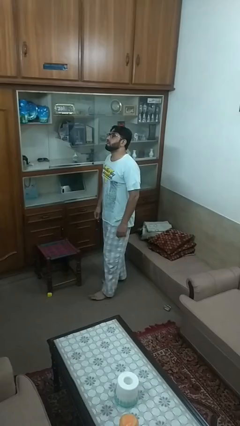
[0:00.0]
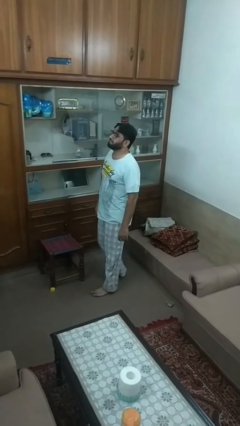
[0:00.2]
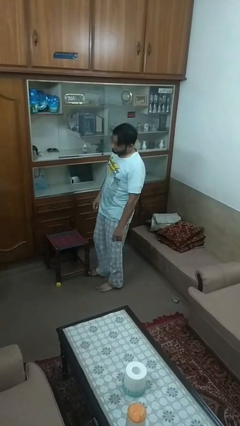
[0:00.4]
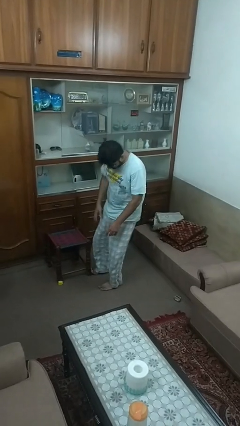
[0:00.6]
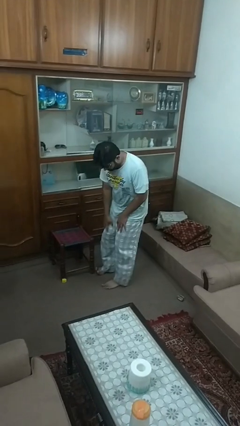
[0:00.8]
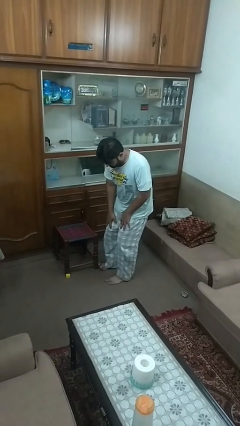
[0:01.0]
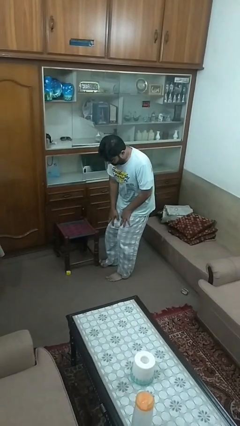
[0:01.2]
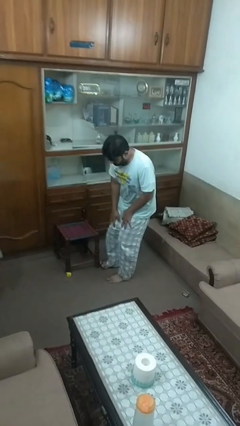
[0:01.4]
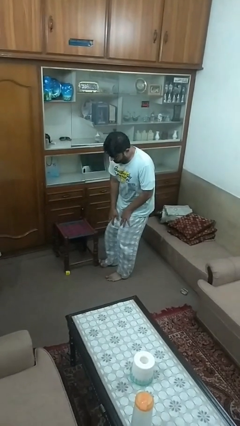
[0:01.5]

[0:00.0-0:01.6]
person trips on object on floor

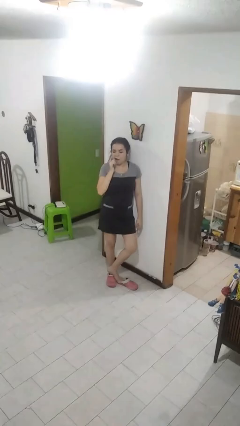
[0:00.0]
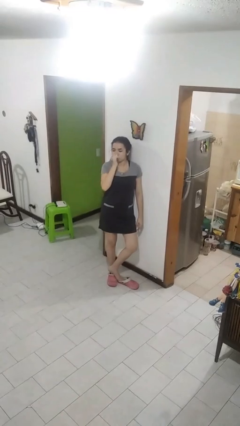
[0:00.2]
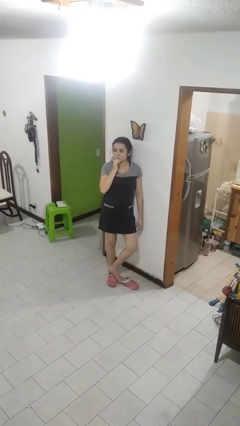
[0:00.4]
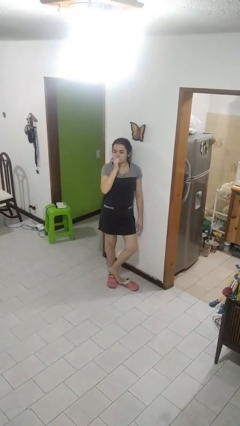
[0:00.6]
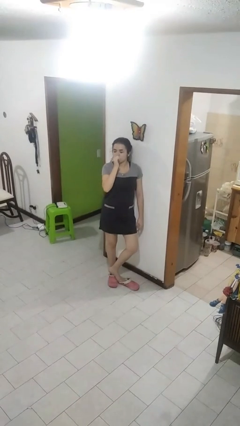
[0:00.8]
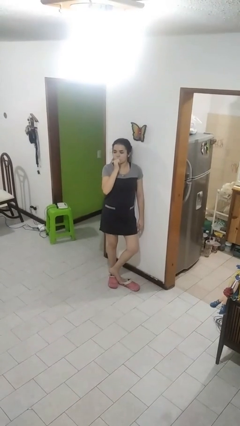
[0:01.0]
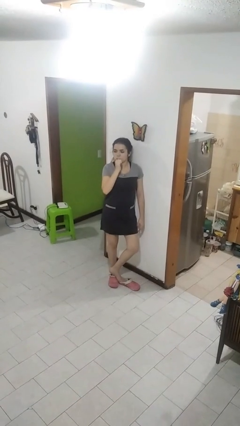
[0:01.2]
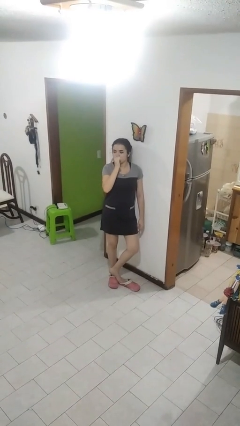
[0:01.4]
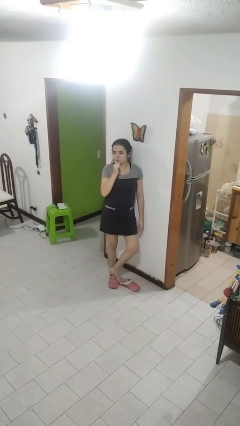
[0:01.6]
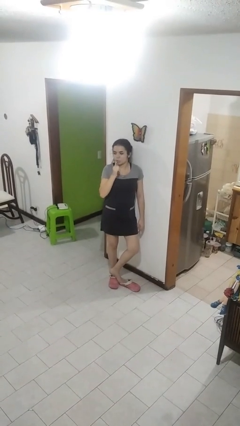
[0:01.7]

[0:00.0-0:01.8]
person brushes teeth

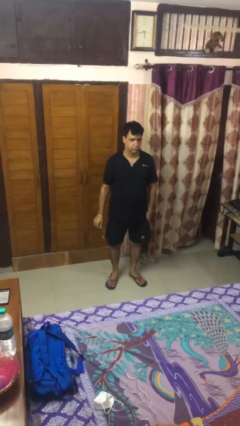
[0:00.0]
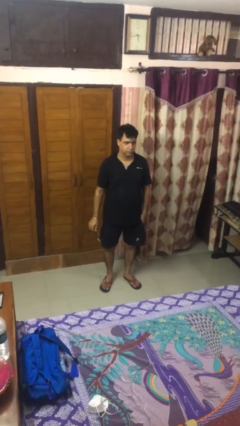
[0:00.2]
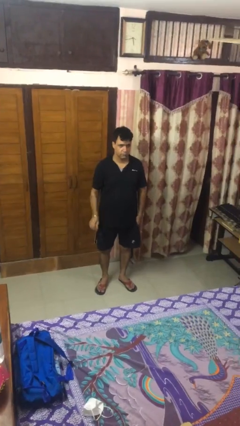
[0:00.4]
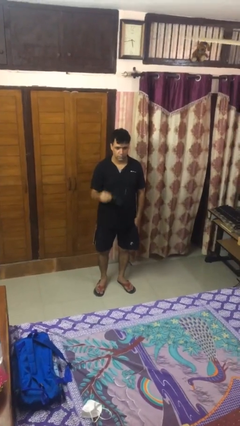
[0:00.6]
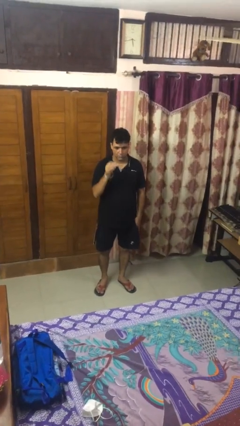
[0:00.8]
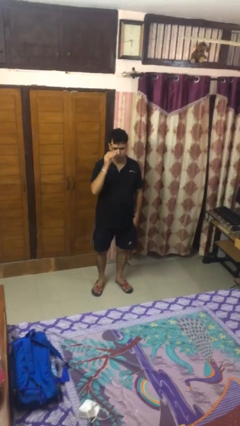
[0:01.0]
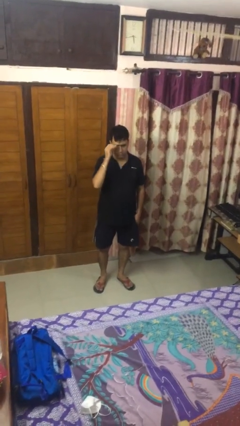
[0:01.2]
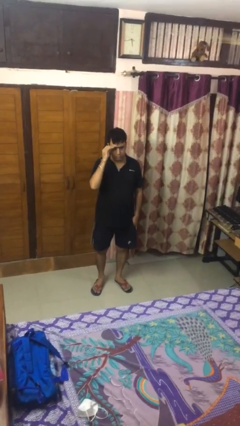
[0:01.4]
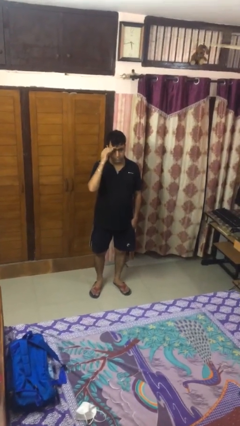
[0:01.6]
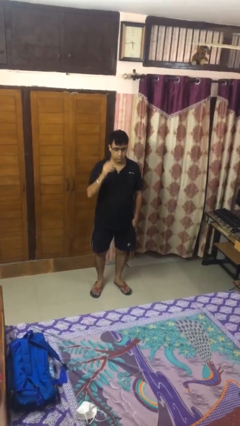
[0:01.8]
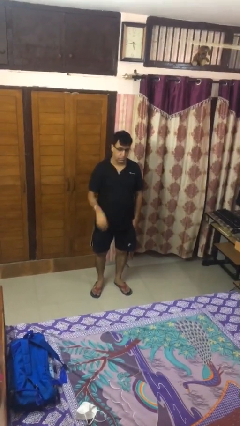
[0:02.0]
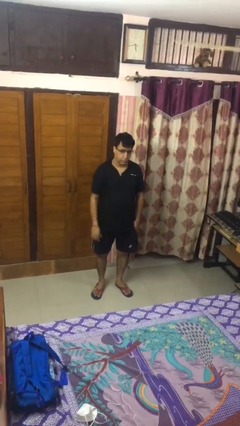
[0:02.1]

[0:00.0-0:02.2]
person puts on glasses

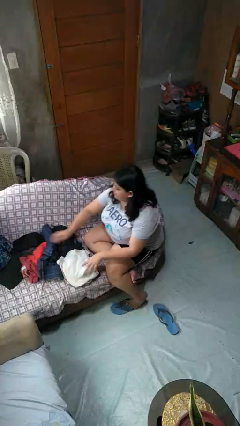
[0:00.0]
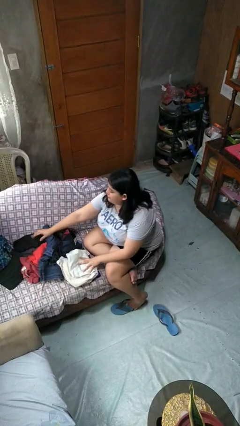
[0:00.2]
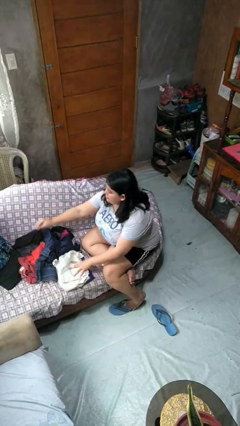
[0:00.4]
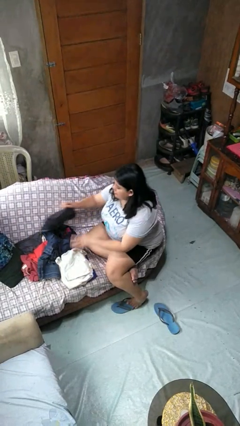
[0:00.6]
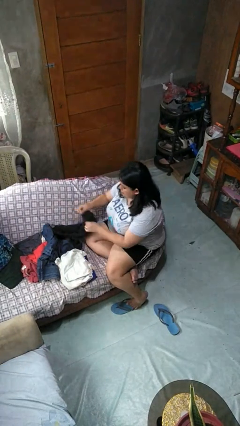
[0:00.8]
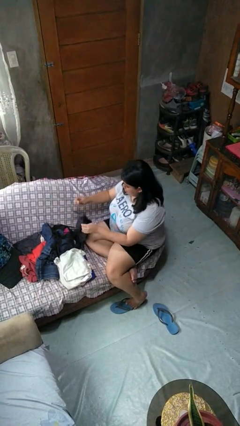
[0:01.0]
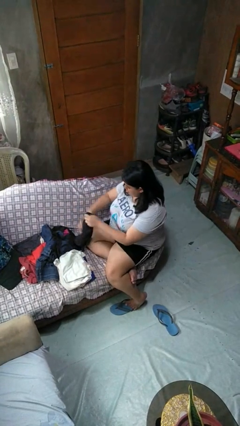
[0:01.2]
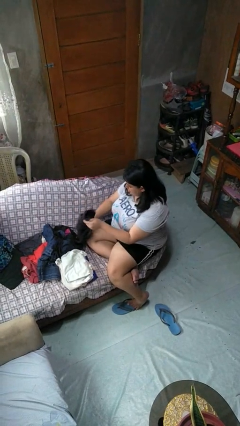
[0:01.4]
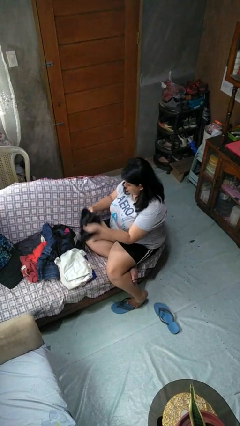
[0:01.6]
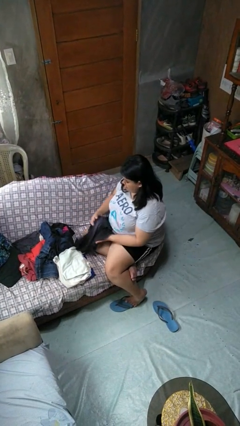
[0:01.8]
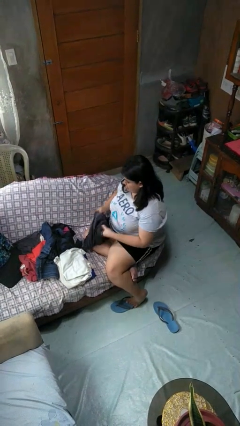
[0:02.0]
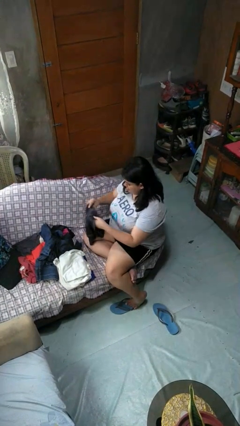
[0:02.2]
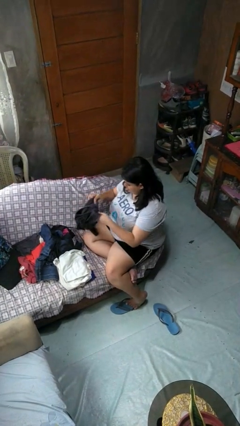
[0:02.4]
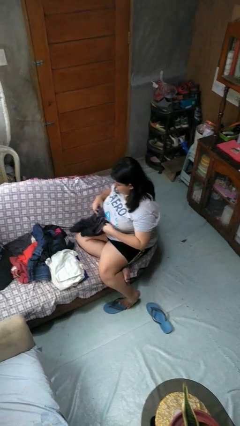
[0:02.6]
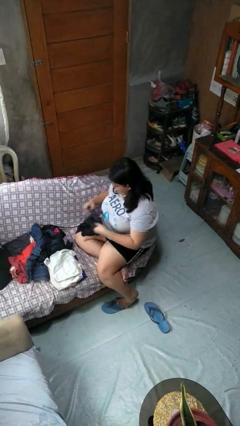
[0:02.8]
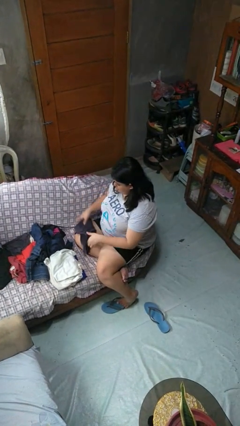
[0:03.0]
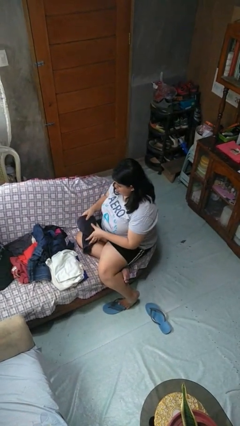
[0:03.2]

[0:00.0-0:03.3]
person folds shirt

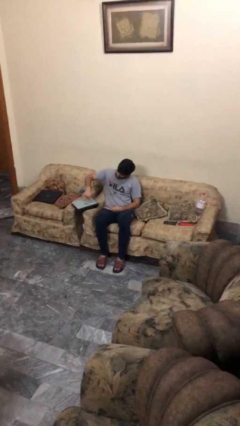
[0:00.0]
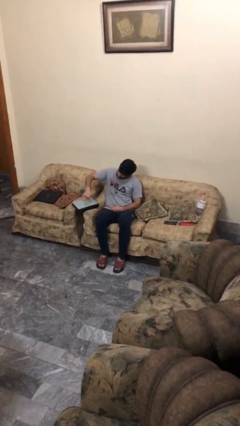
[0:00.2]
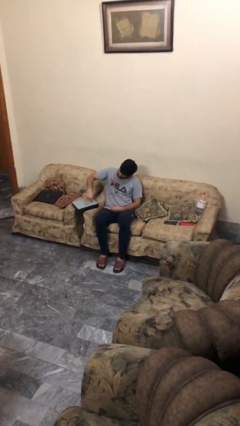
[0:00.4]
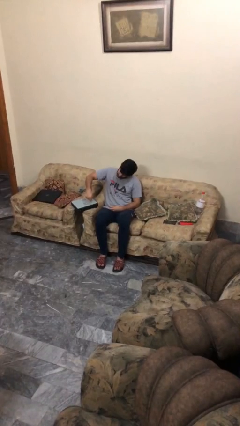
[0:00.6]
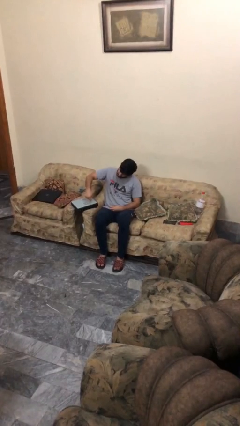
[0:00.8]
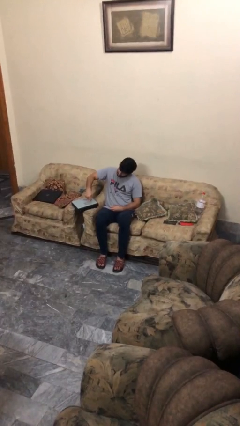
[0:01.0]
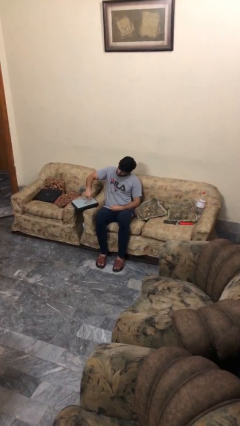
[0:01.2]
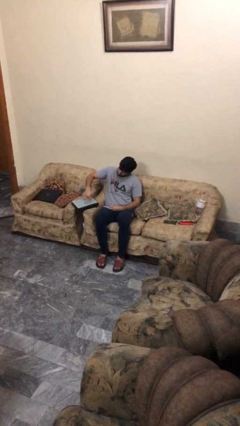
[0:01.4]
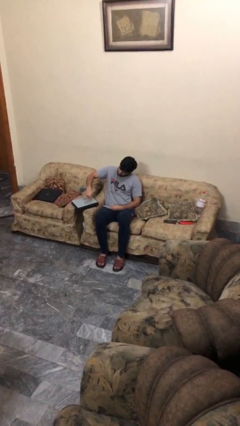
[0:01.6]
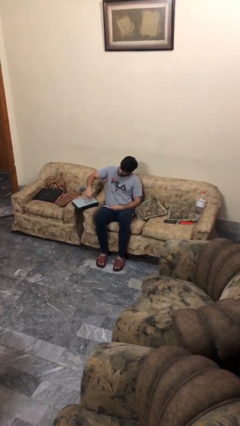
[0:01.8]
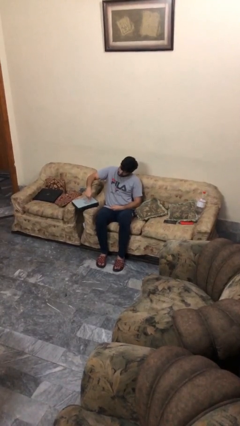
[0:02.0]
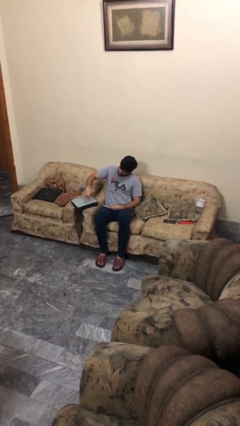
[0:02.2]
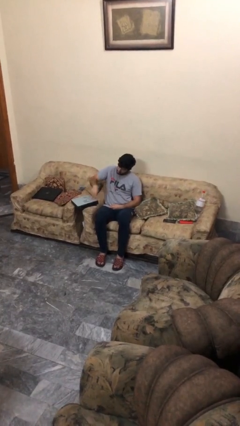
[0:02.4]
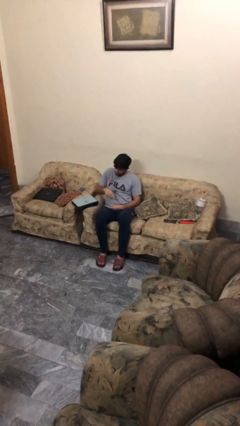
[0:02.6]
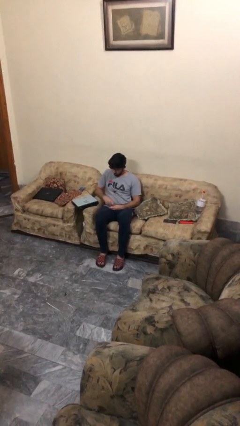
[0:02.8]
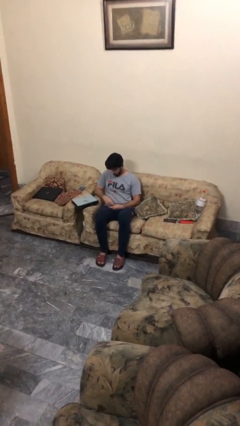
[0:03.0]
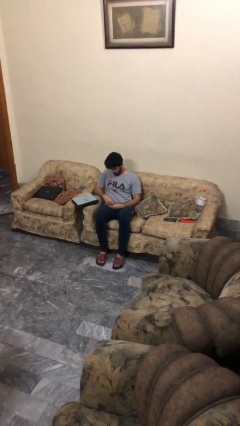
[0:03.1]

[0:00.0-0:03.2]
person taps object with finger

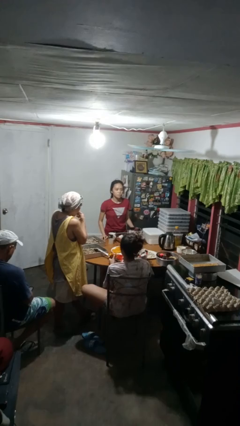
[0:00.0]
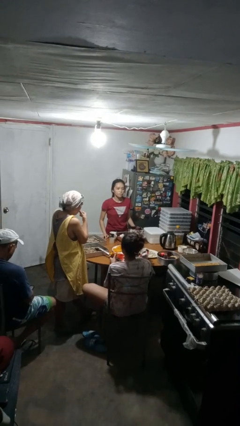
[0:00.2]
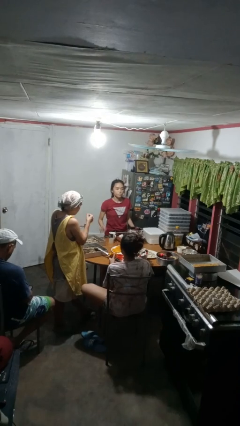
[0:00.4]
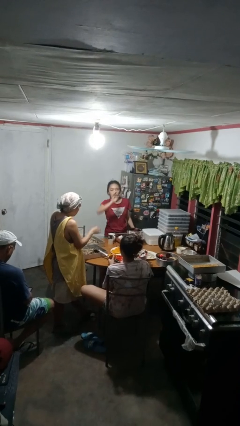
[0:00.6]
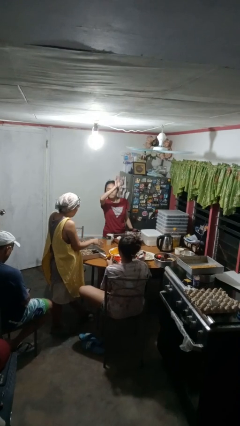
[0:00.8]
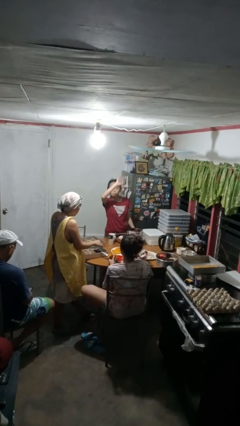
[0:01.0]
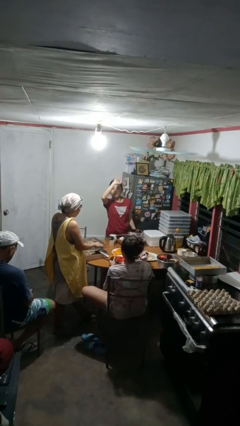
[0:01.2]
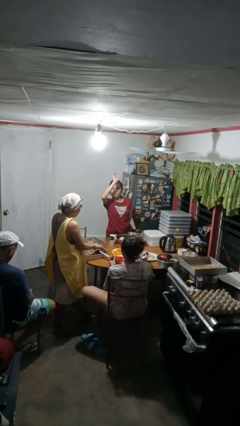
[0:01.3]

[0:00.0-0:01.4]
person waves at person

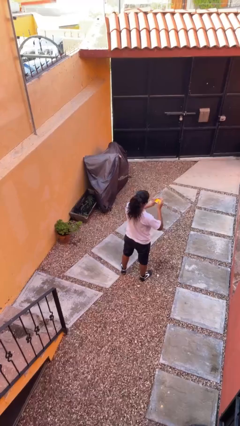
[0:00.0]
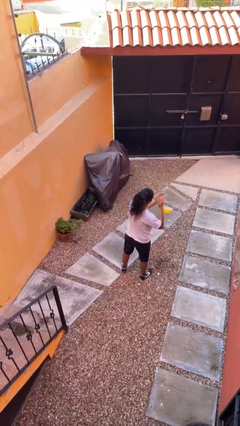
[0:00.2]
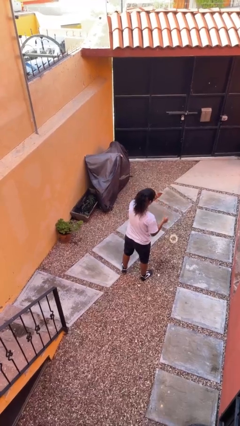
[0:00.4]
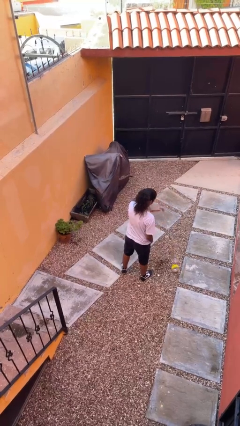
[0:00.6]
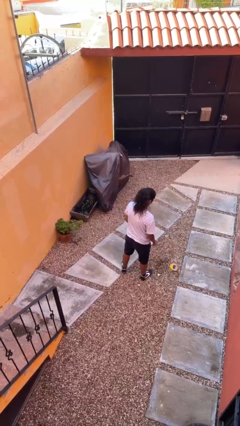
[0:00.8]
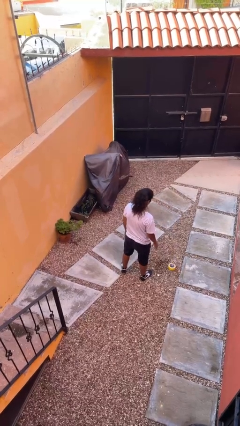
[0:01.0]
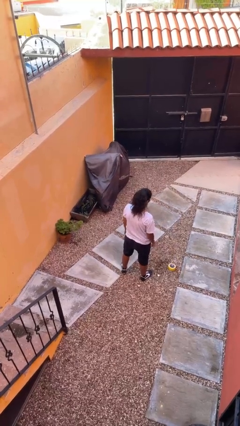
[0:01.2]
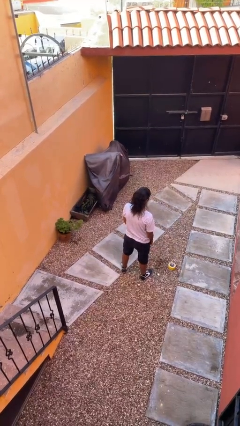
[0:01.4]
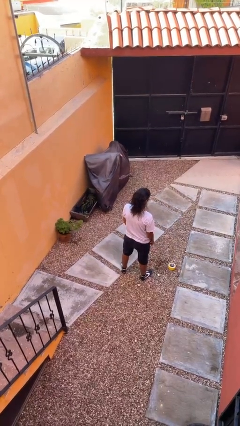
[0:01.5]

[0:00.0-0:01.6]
person drops object

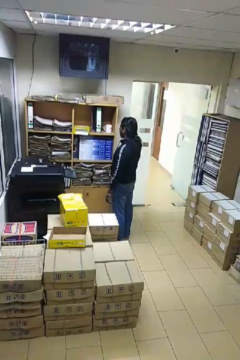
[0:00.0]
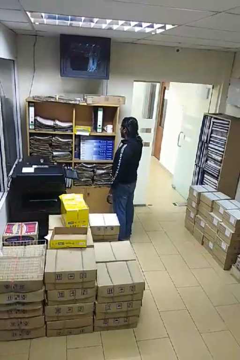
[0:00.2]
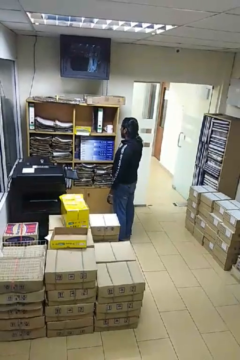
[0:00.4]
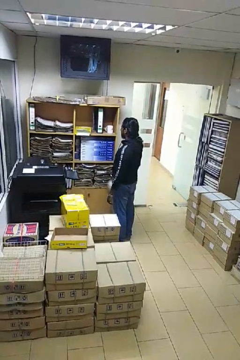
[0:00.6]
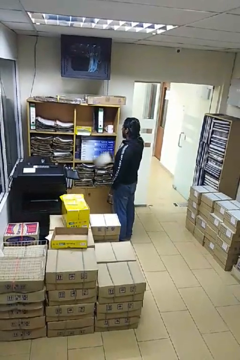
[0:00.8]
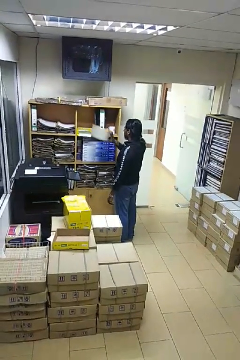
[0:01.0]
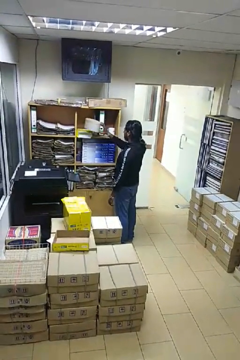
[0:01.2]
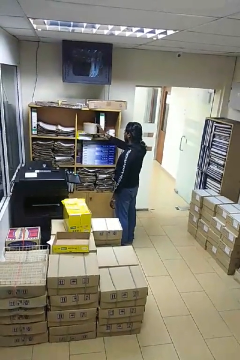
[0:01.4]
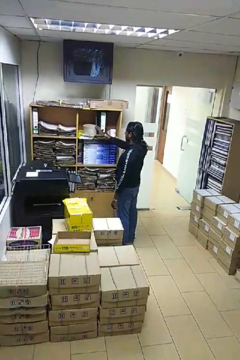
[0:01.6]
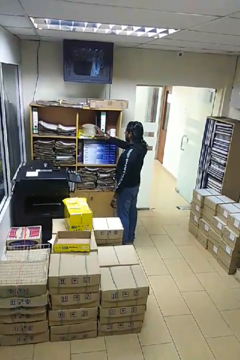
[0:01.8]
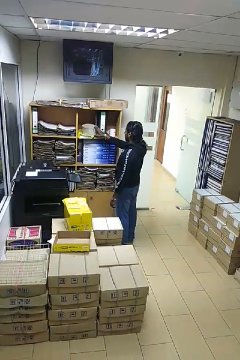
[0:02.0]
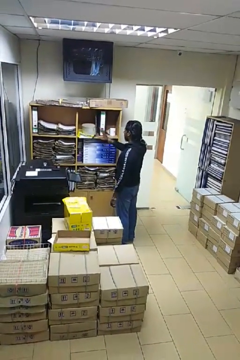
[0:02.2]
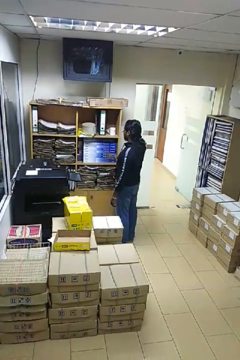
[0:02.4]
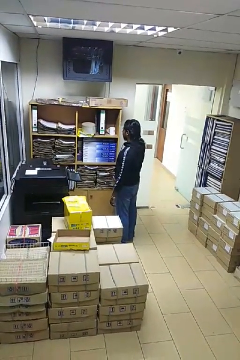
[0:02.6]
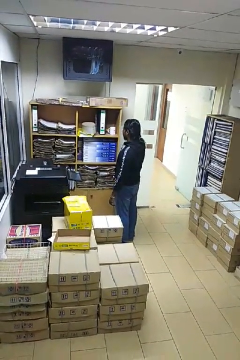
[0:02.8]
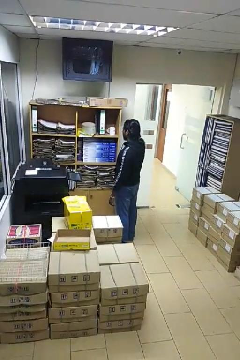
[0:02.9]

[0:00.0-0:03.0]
person puts down object into cabinet
